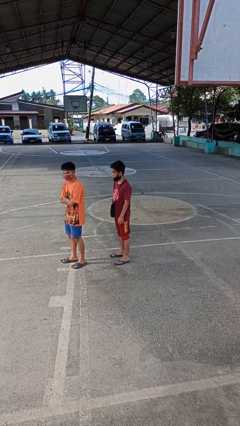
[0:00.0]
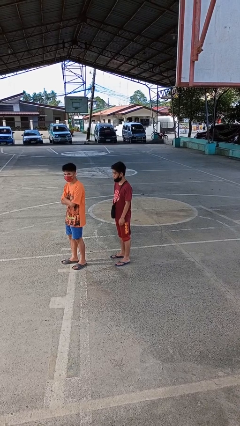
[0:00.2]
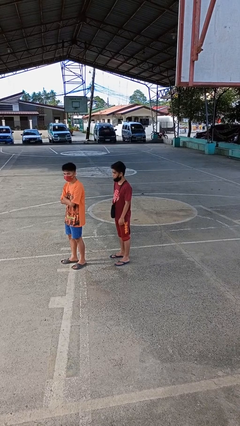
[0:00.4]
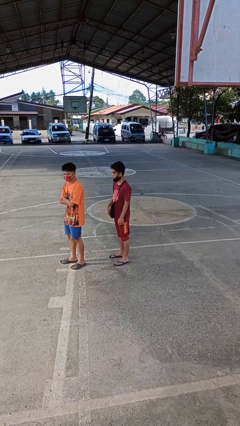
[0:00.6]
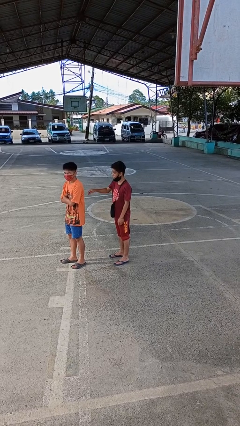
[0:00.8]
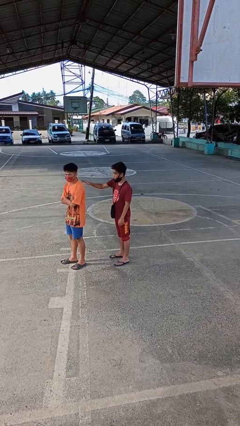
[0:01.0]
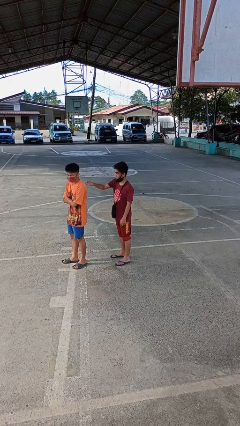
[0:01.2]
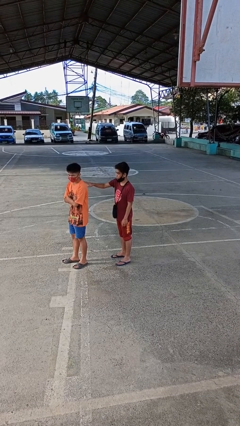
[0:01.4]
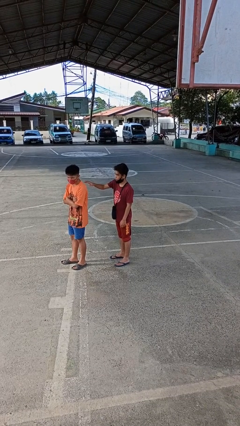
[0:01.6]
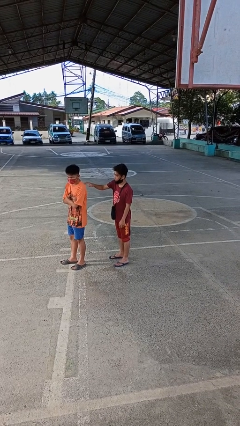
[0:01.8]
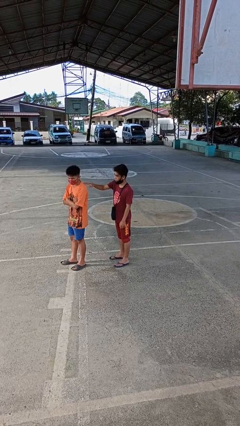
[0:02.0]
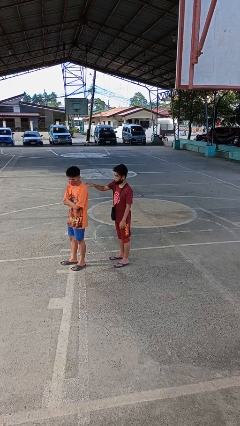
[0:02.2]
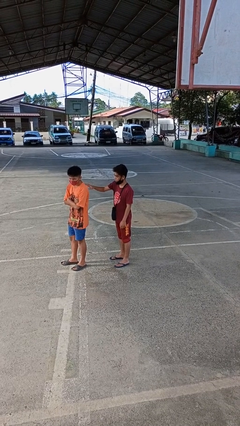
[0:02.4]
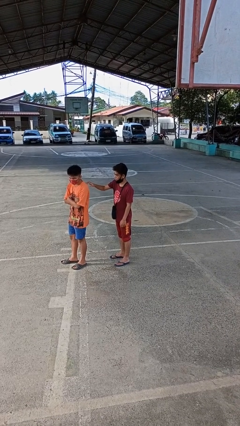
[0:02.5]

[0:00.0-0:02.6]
person touches back of person

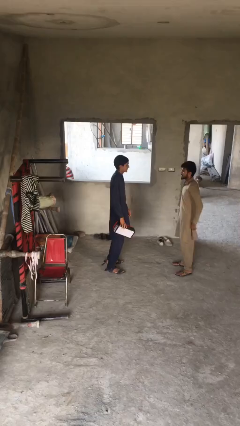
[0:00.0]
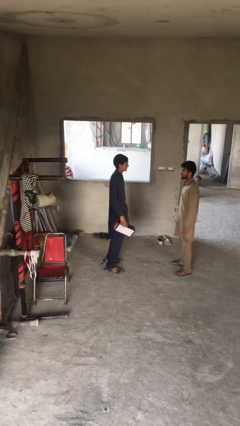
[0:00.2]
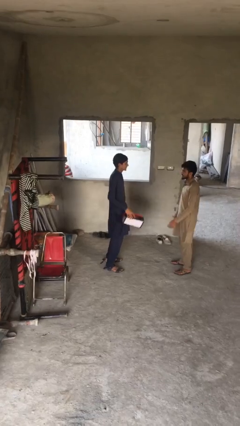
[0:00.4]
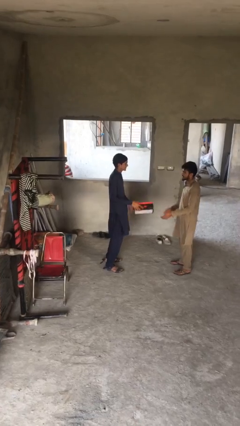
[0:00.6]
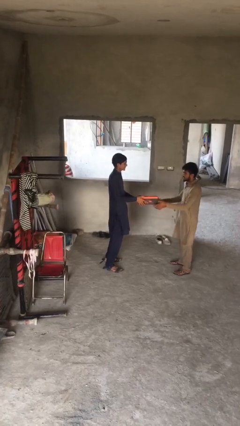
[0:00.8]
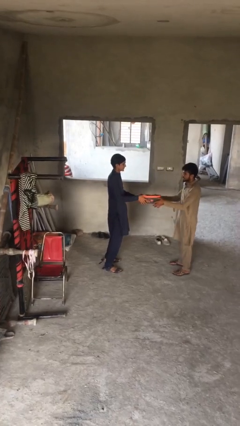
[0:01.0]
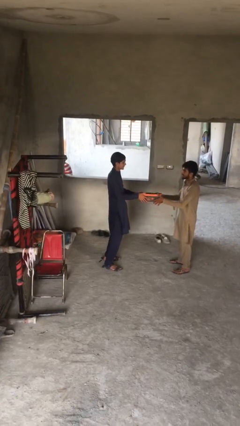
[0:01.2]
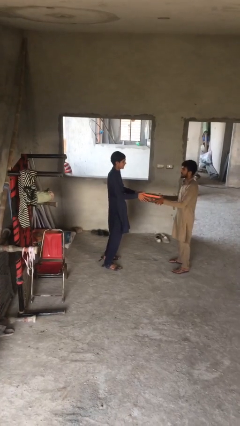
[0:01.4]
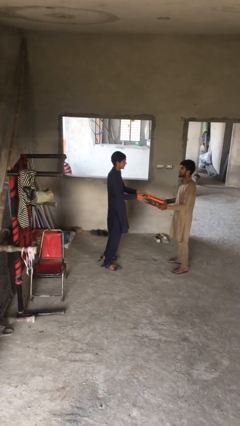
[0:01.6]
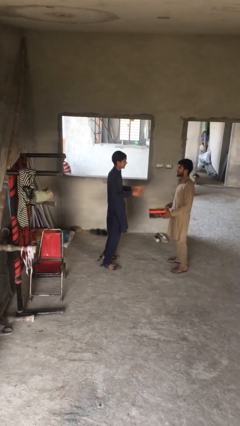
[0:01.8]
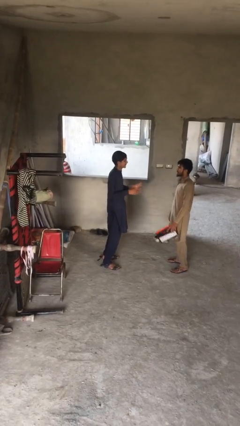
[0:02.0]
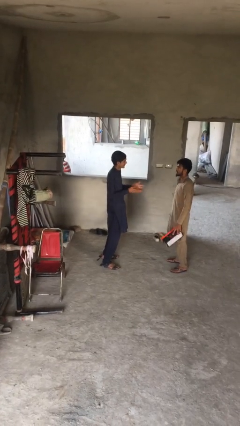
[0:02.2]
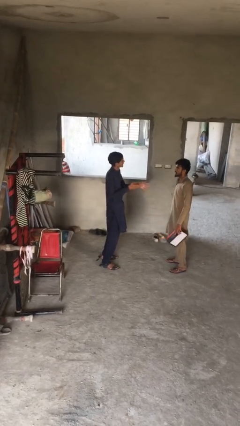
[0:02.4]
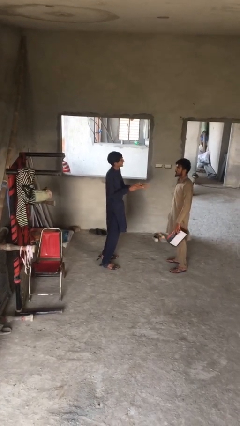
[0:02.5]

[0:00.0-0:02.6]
person transfers object to person

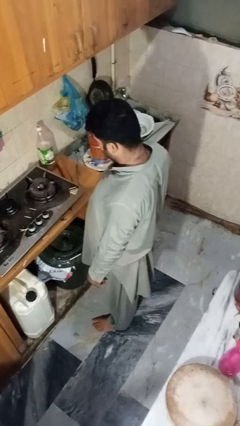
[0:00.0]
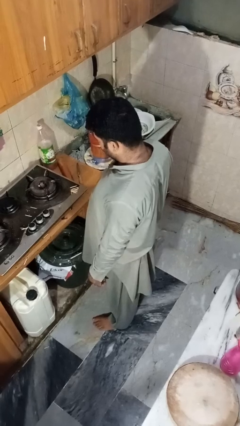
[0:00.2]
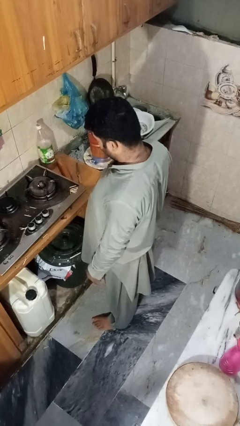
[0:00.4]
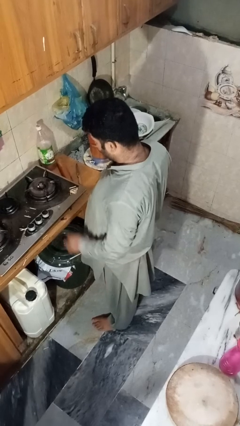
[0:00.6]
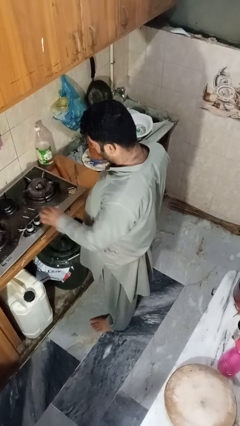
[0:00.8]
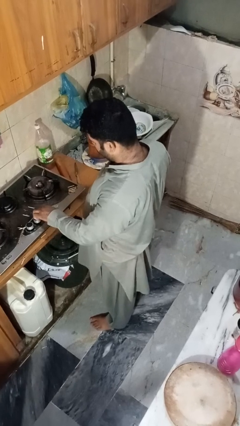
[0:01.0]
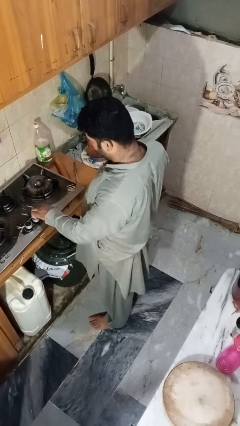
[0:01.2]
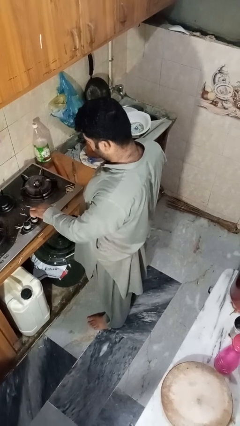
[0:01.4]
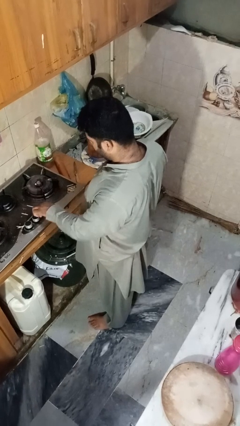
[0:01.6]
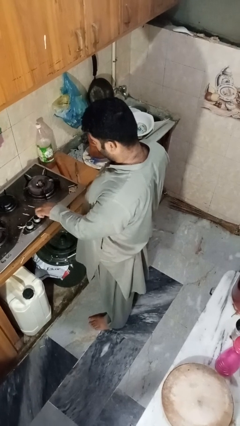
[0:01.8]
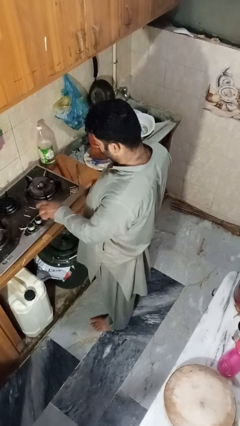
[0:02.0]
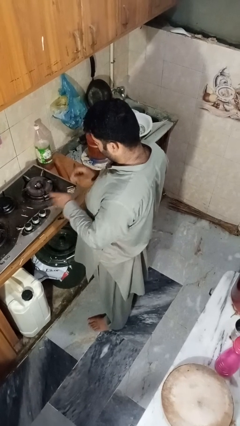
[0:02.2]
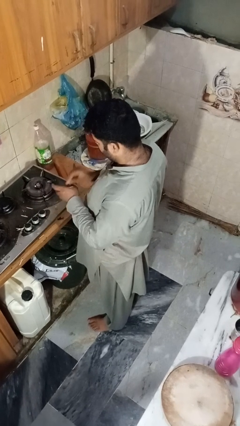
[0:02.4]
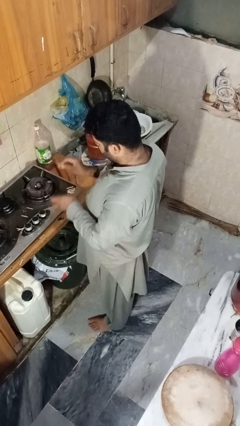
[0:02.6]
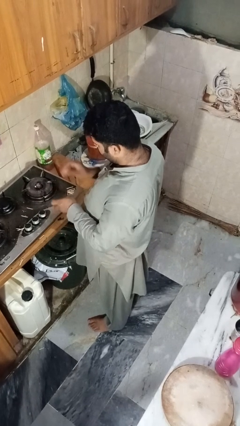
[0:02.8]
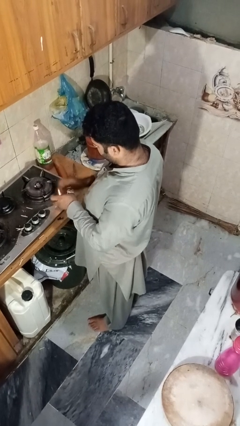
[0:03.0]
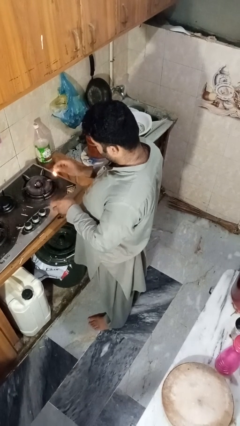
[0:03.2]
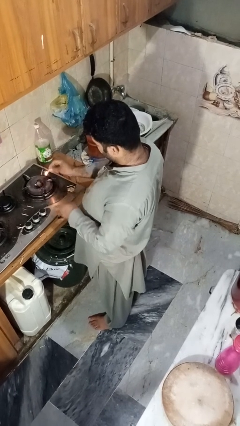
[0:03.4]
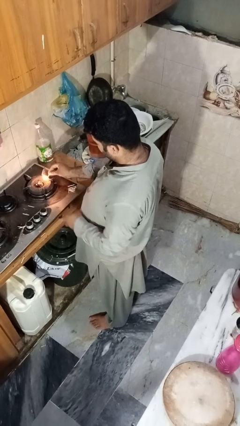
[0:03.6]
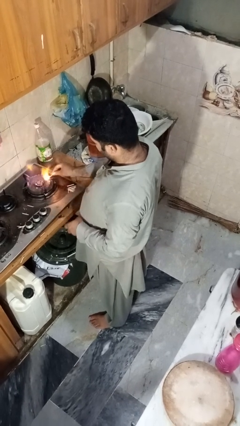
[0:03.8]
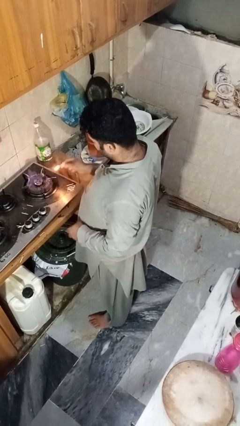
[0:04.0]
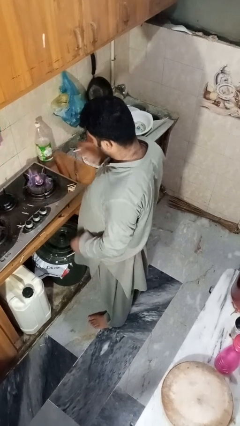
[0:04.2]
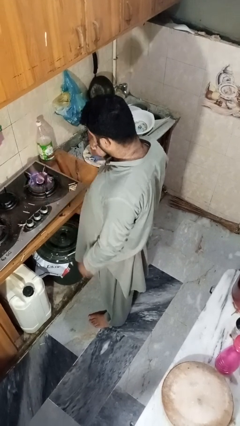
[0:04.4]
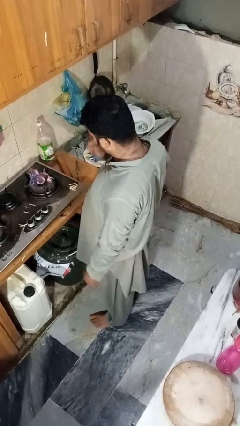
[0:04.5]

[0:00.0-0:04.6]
person turns on stovetop

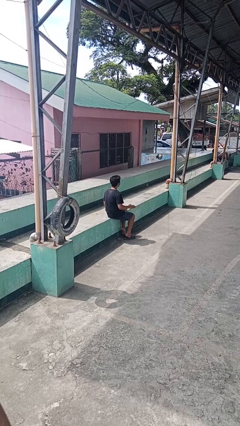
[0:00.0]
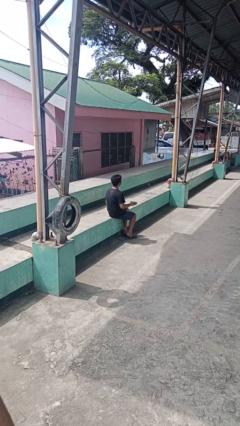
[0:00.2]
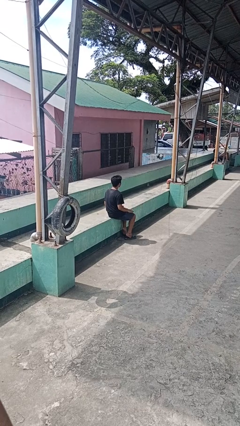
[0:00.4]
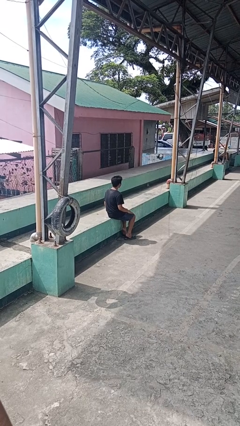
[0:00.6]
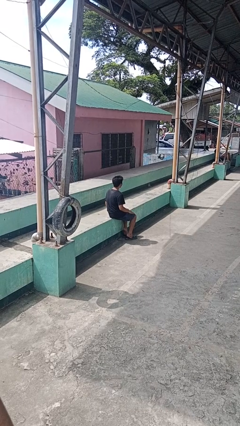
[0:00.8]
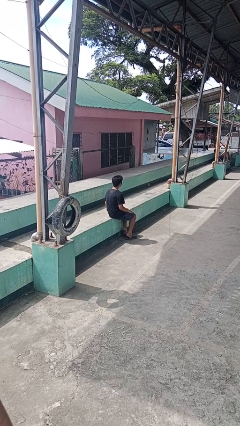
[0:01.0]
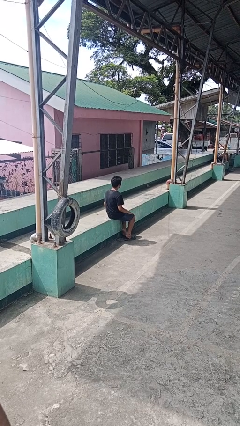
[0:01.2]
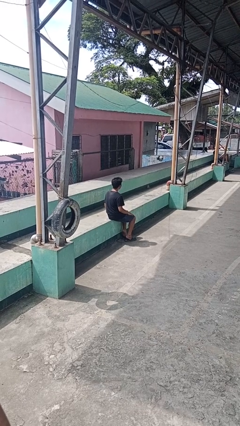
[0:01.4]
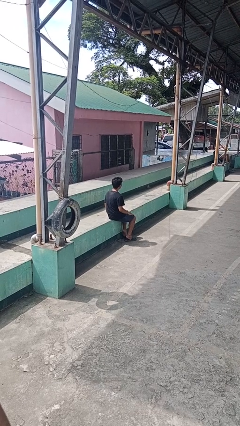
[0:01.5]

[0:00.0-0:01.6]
person slaps hands on thighs

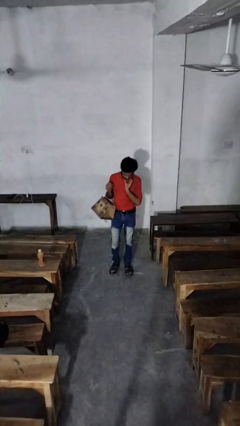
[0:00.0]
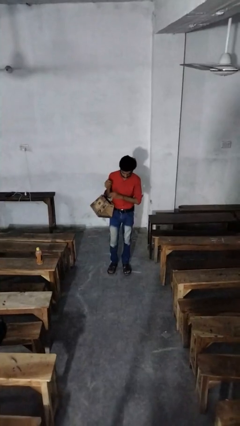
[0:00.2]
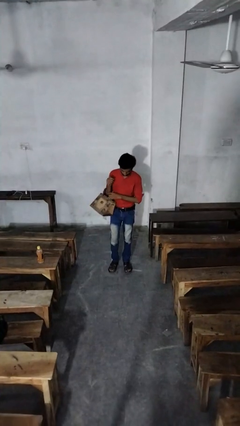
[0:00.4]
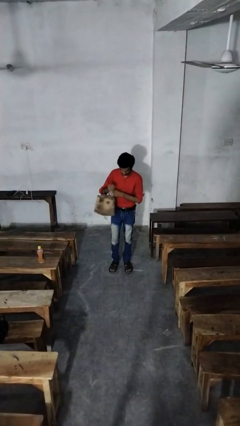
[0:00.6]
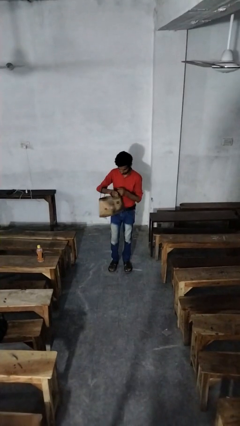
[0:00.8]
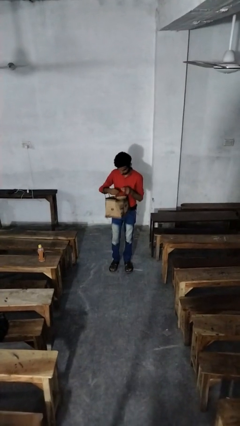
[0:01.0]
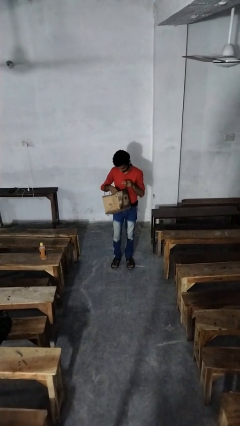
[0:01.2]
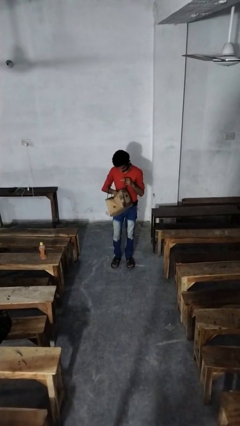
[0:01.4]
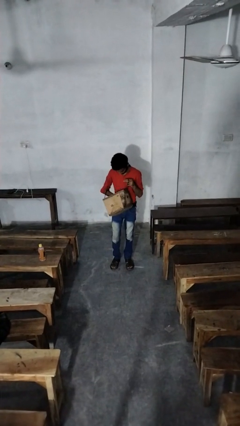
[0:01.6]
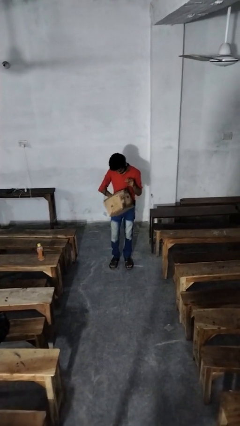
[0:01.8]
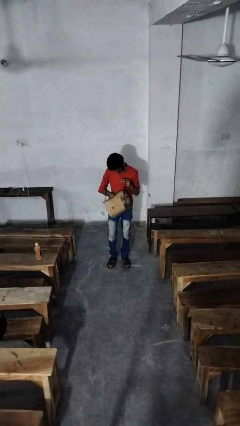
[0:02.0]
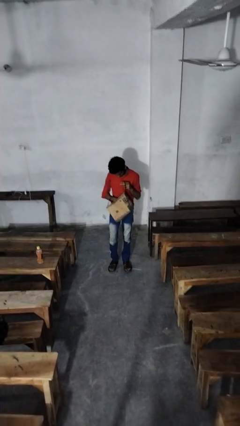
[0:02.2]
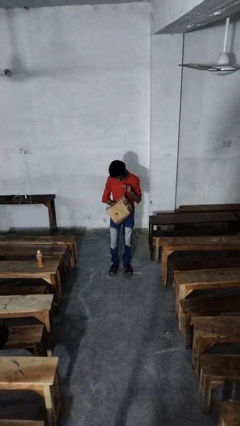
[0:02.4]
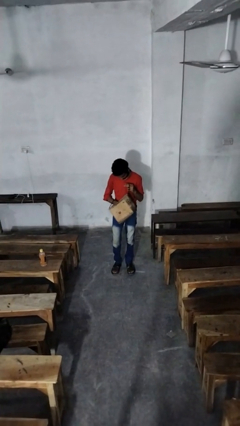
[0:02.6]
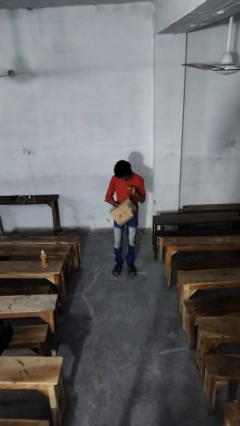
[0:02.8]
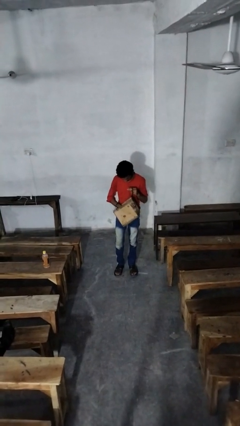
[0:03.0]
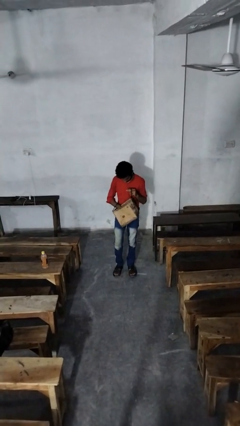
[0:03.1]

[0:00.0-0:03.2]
person searches in purse

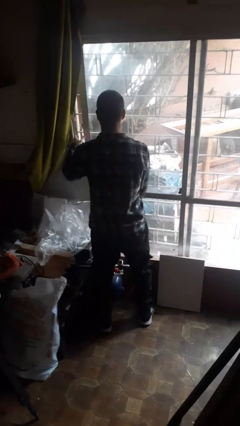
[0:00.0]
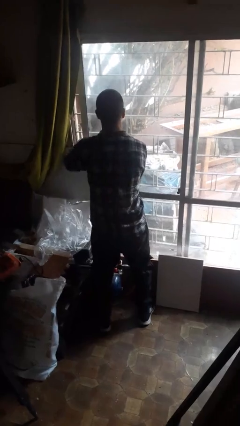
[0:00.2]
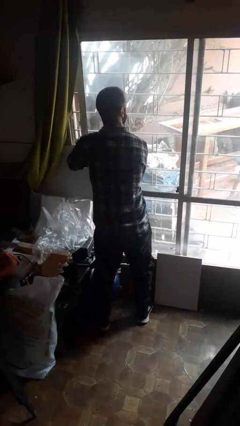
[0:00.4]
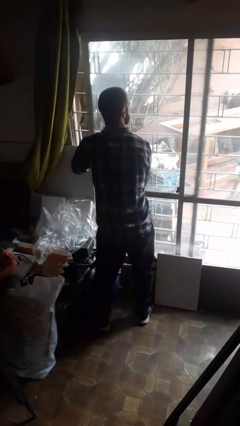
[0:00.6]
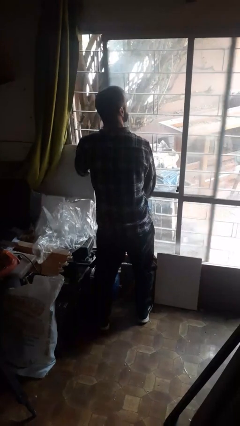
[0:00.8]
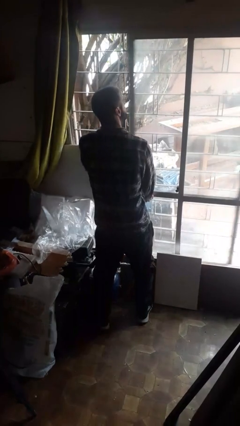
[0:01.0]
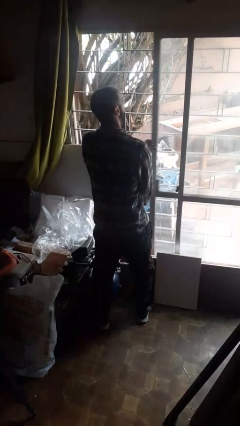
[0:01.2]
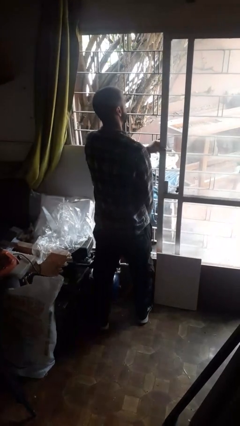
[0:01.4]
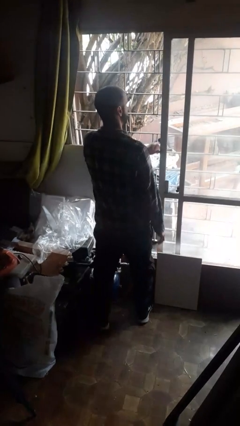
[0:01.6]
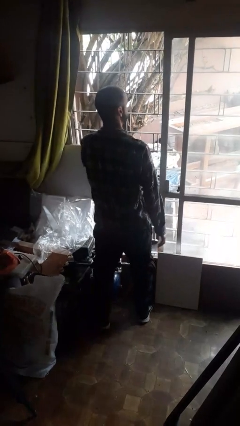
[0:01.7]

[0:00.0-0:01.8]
person opens sliding door

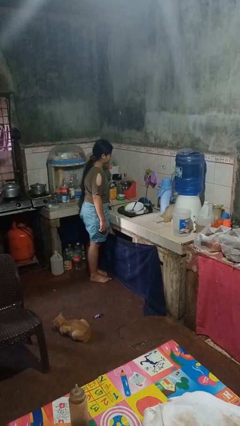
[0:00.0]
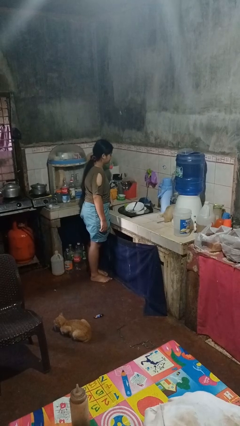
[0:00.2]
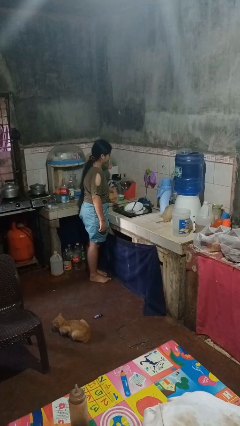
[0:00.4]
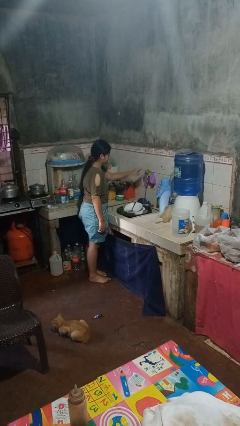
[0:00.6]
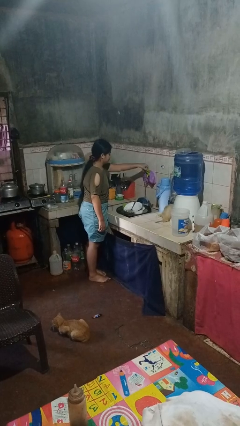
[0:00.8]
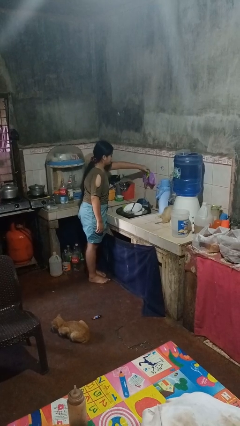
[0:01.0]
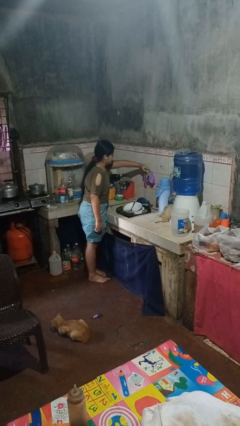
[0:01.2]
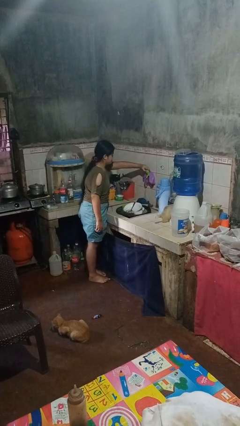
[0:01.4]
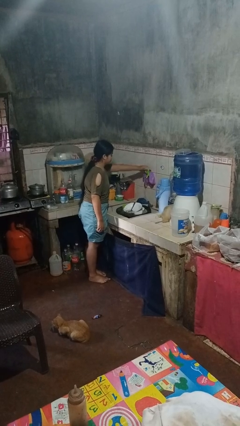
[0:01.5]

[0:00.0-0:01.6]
person turns off faucet
